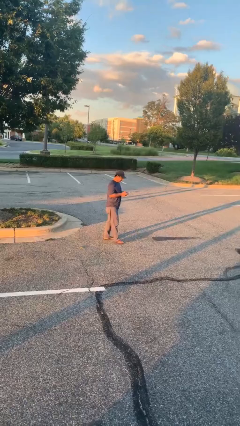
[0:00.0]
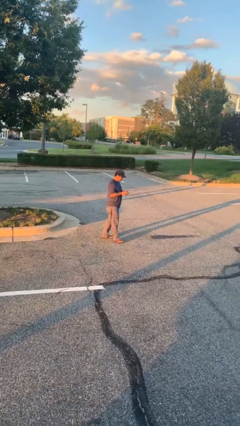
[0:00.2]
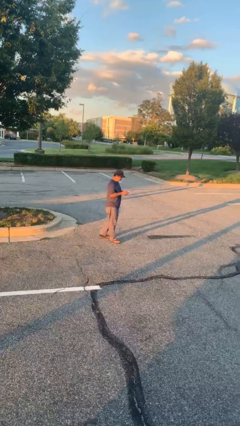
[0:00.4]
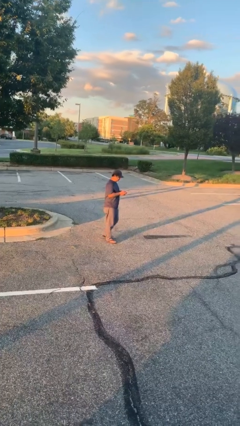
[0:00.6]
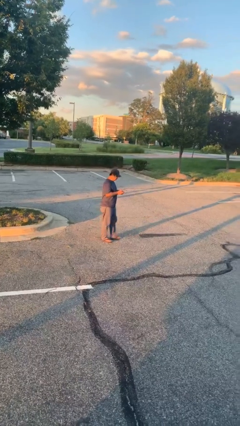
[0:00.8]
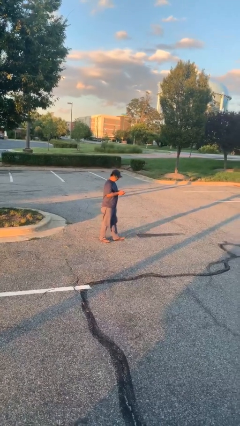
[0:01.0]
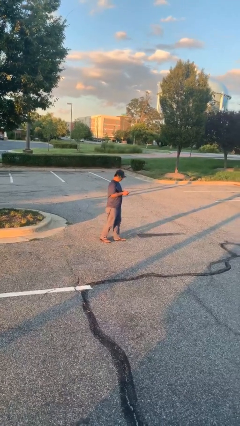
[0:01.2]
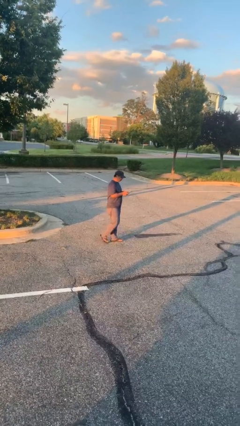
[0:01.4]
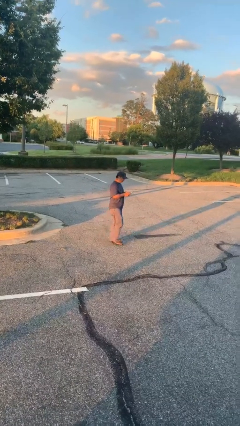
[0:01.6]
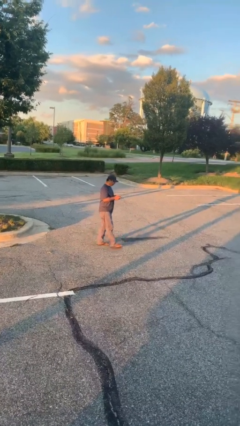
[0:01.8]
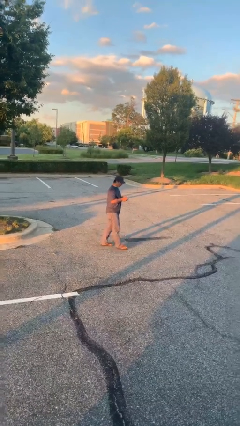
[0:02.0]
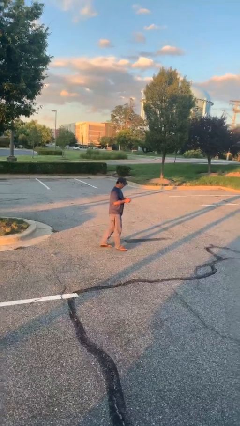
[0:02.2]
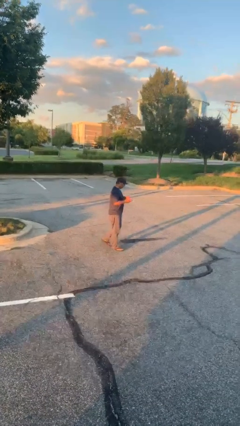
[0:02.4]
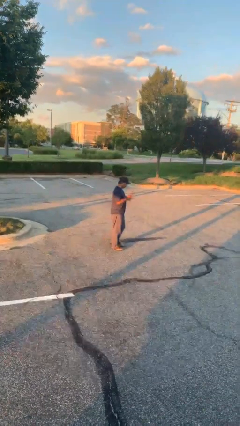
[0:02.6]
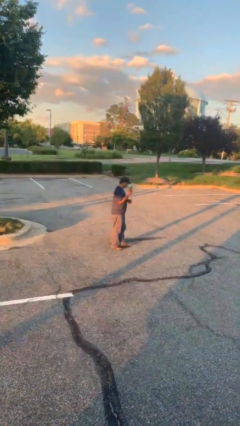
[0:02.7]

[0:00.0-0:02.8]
person texts on phone

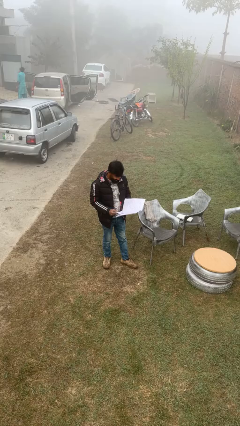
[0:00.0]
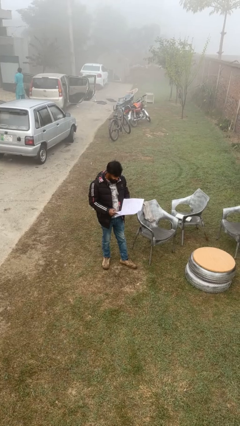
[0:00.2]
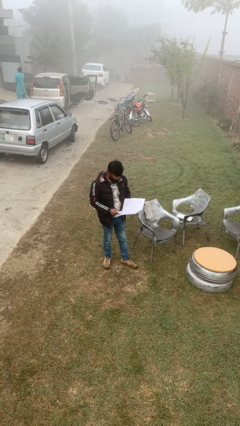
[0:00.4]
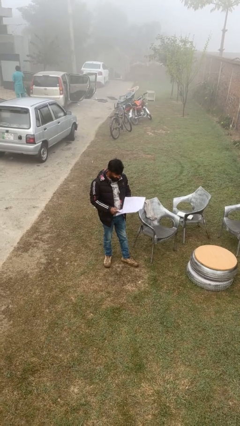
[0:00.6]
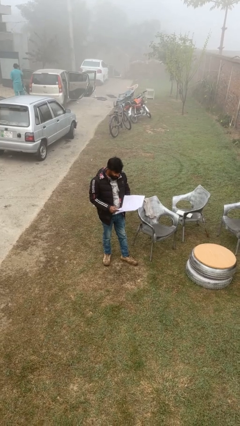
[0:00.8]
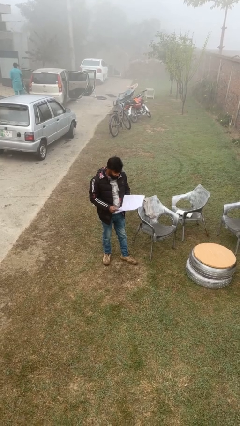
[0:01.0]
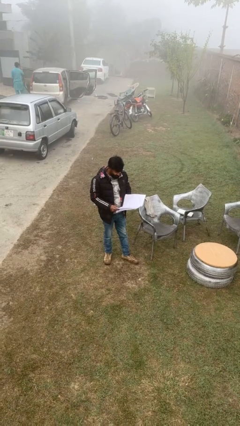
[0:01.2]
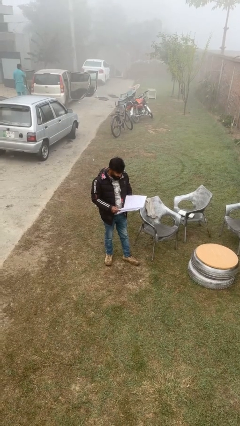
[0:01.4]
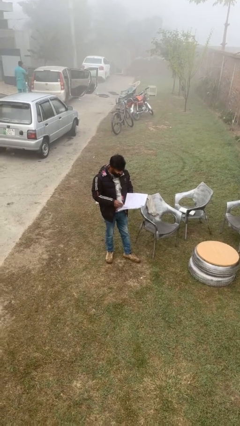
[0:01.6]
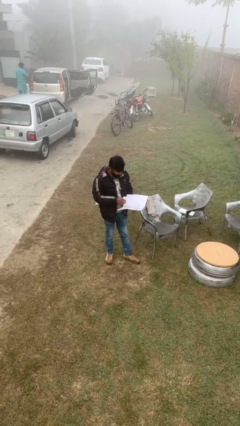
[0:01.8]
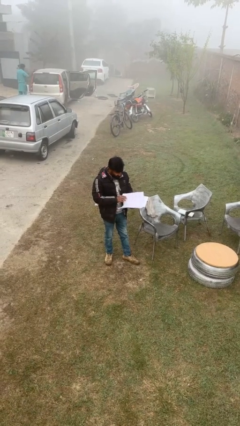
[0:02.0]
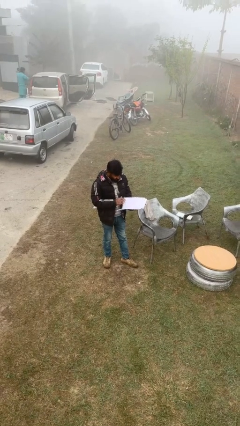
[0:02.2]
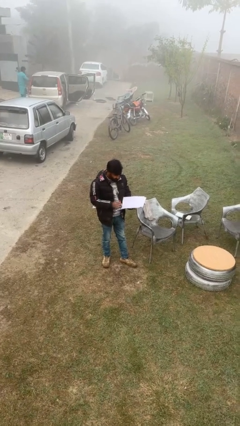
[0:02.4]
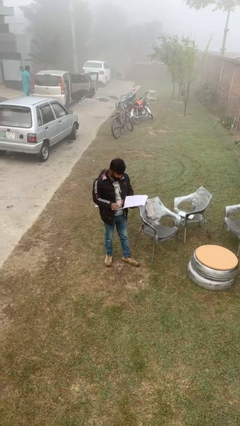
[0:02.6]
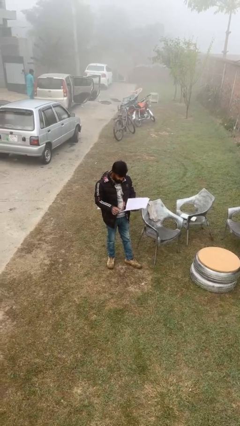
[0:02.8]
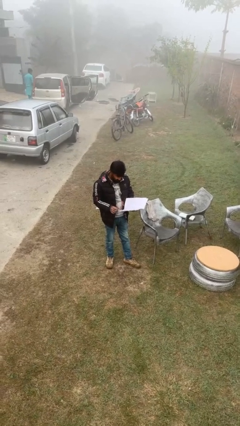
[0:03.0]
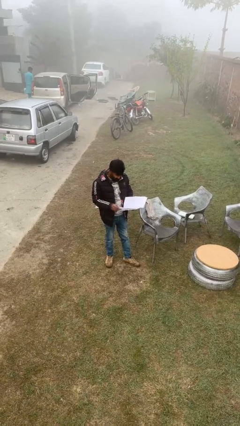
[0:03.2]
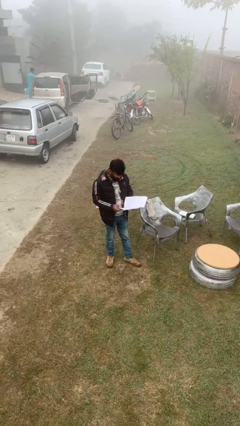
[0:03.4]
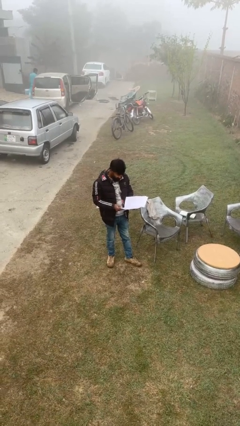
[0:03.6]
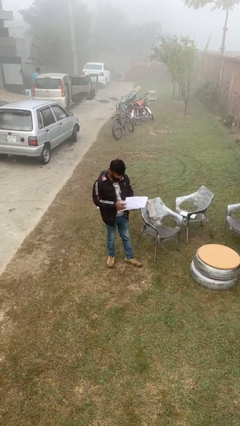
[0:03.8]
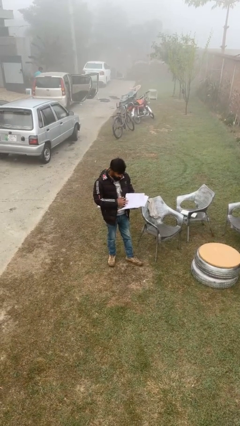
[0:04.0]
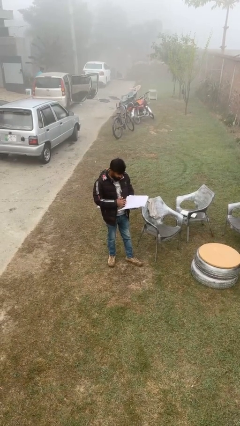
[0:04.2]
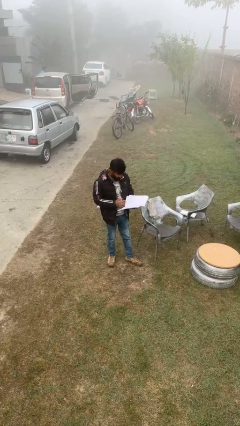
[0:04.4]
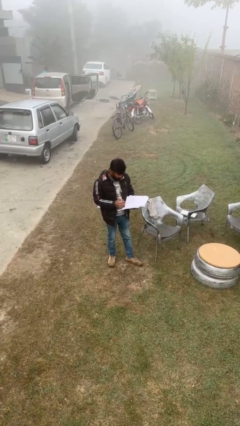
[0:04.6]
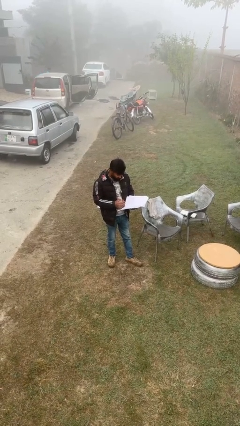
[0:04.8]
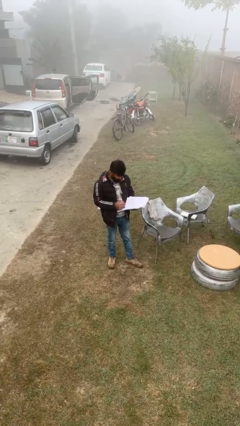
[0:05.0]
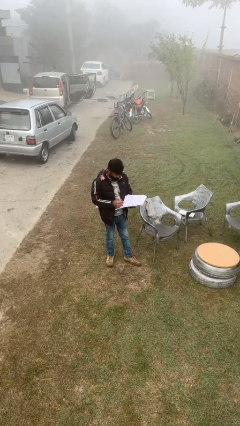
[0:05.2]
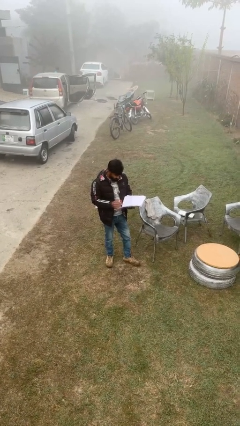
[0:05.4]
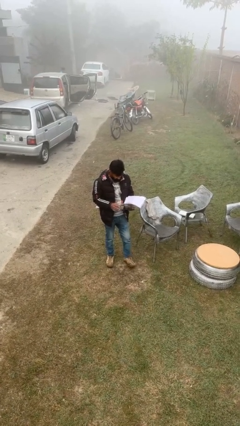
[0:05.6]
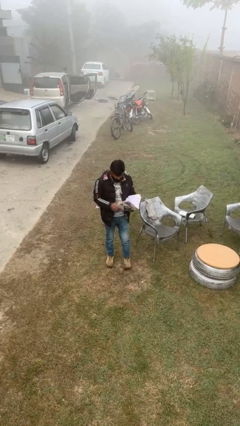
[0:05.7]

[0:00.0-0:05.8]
person reads document

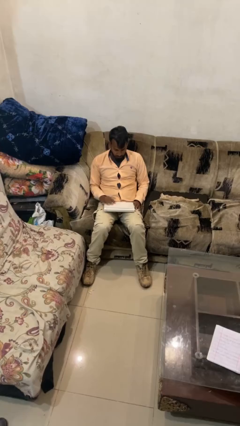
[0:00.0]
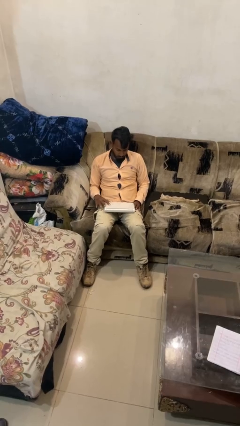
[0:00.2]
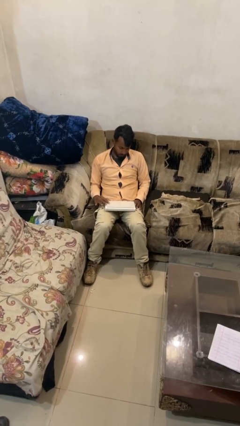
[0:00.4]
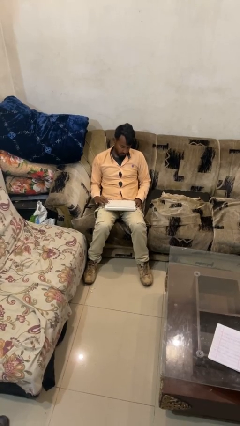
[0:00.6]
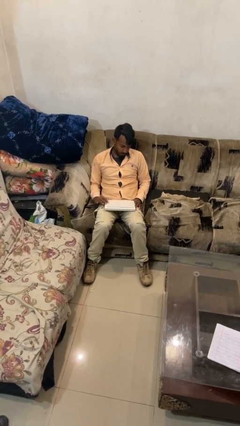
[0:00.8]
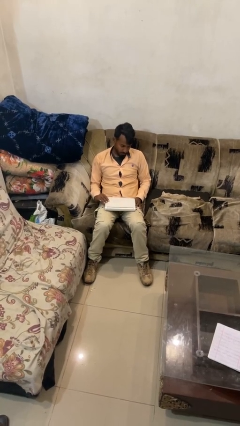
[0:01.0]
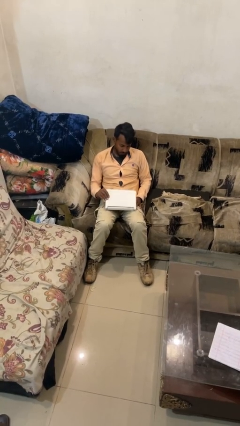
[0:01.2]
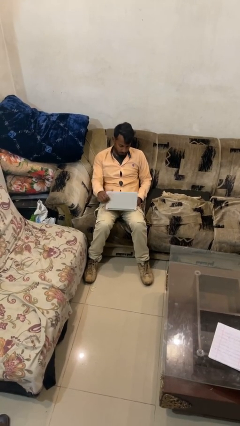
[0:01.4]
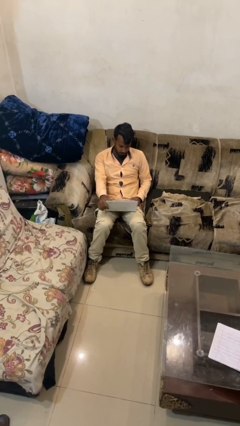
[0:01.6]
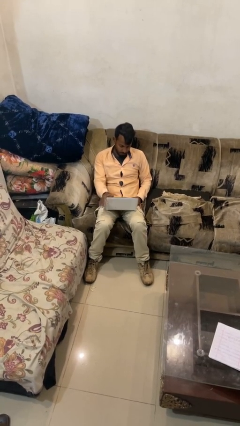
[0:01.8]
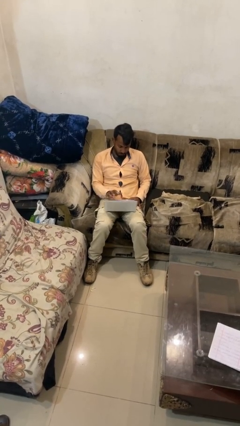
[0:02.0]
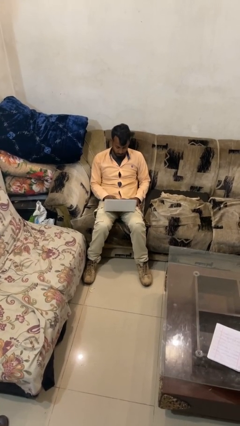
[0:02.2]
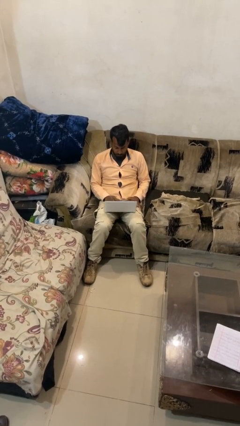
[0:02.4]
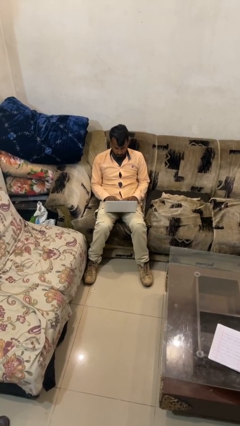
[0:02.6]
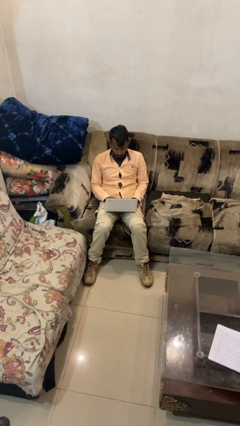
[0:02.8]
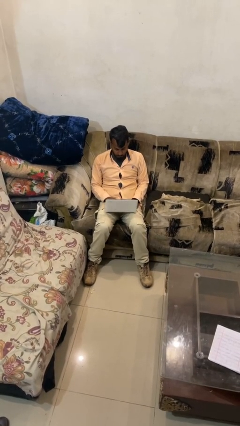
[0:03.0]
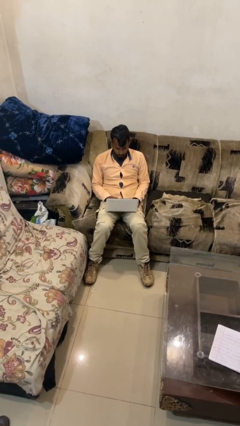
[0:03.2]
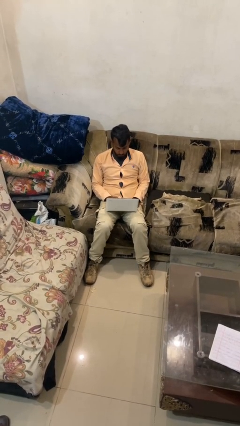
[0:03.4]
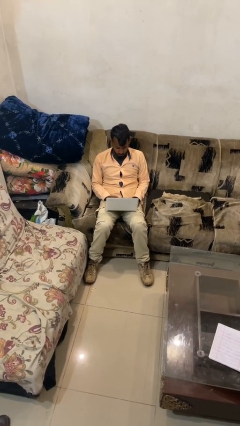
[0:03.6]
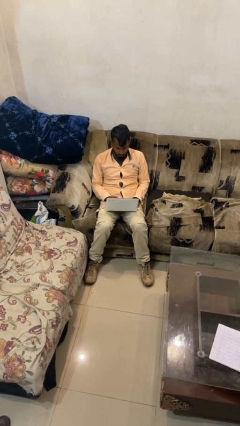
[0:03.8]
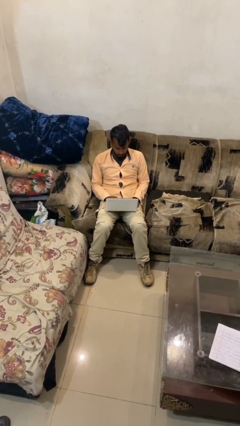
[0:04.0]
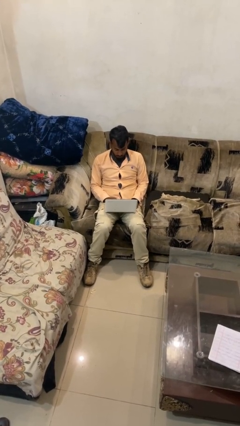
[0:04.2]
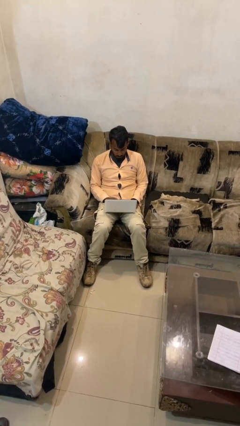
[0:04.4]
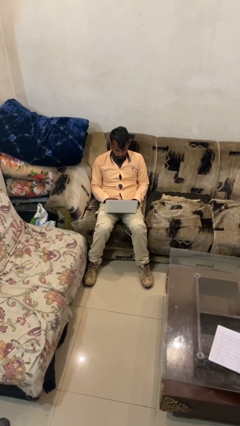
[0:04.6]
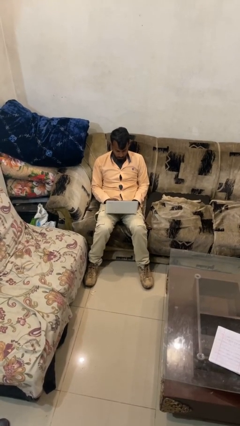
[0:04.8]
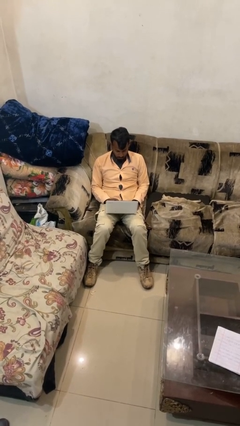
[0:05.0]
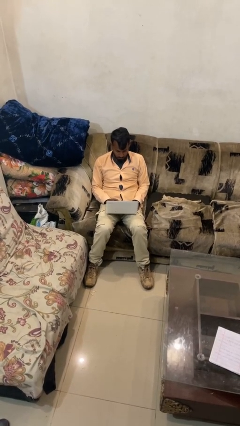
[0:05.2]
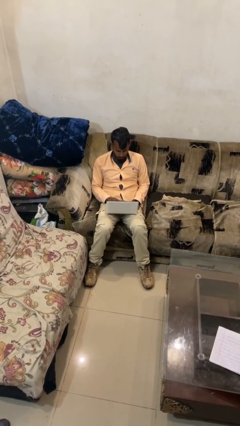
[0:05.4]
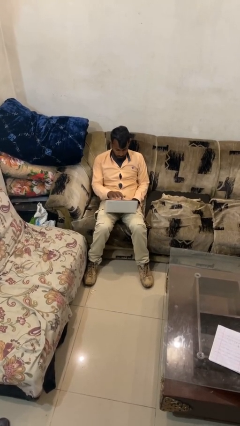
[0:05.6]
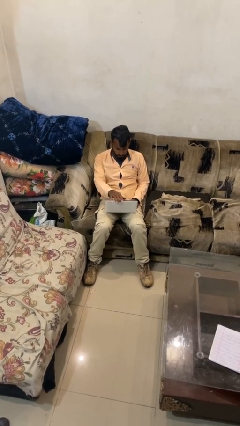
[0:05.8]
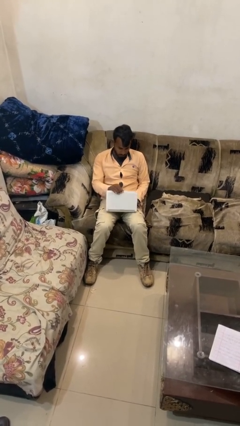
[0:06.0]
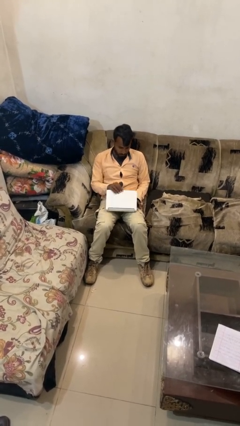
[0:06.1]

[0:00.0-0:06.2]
person interacts with laptop

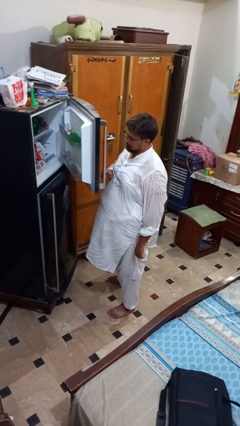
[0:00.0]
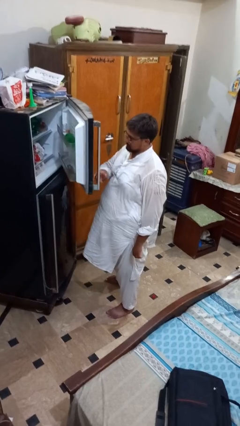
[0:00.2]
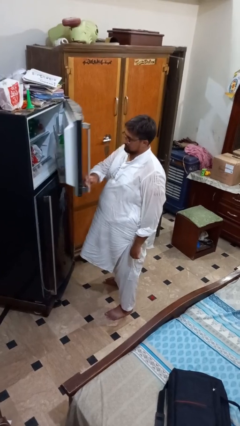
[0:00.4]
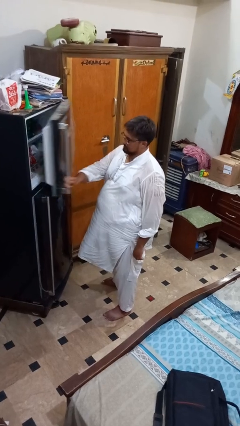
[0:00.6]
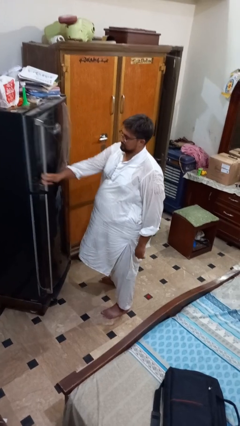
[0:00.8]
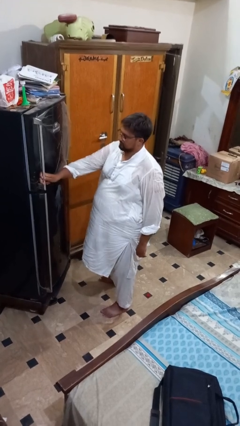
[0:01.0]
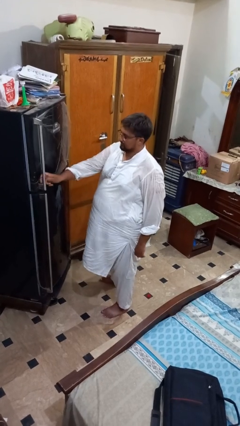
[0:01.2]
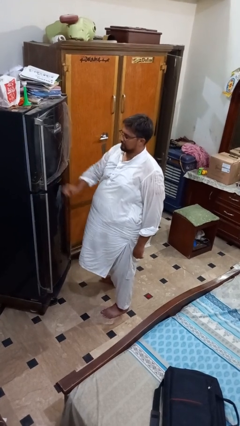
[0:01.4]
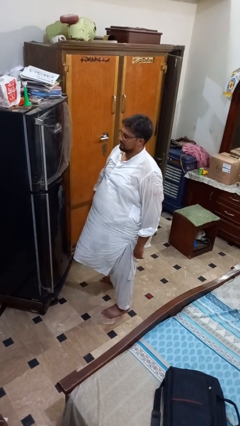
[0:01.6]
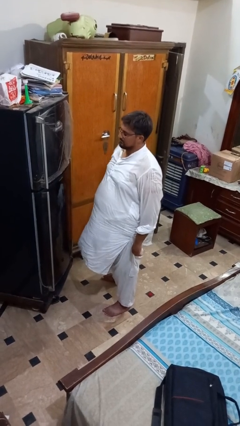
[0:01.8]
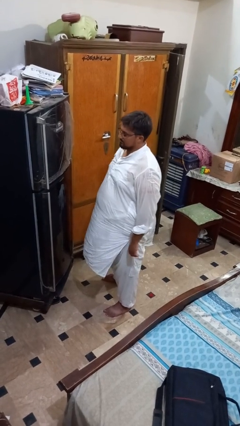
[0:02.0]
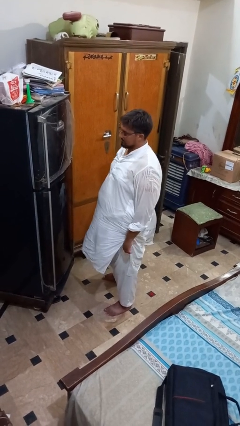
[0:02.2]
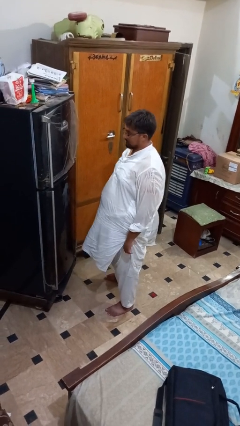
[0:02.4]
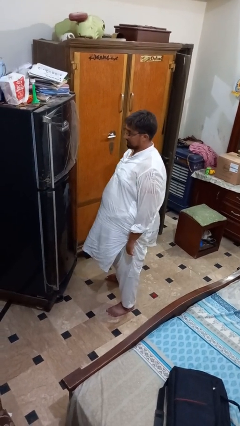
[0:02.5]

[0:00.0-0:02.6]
person closes refrigerator

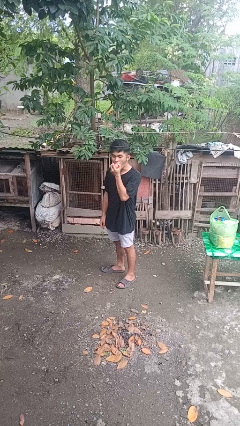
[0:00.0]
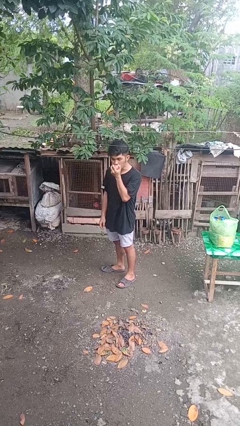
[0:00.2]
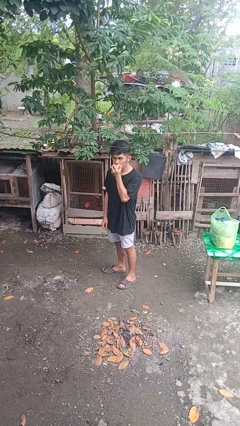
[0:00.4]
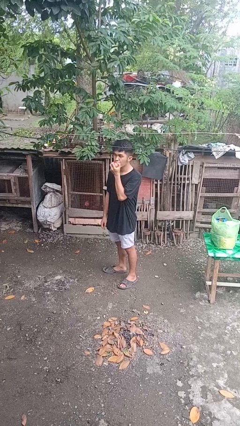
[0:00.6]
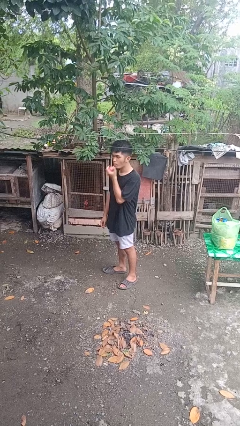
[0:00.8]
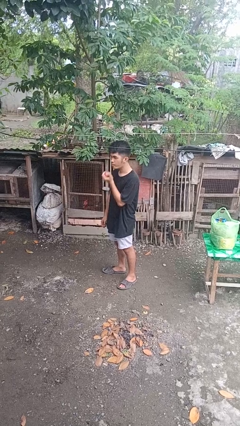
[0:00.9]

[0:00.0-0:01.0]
person eats apple
